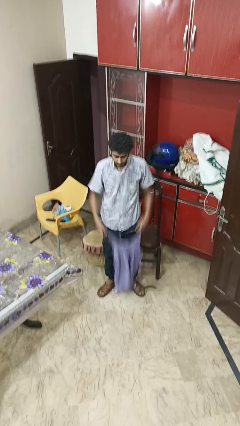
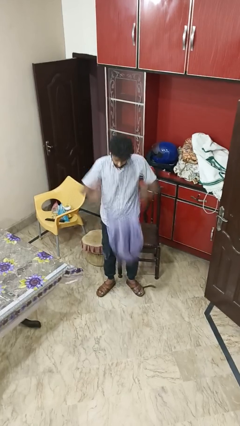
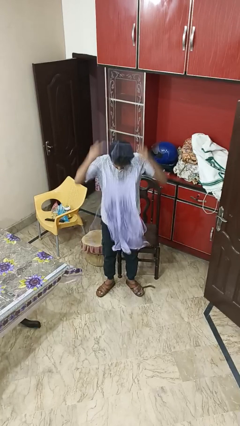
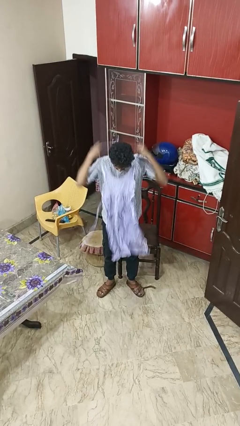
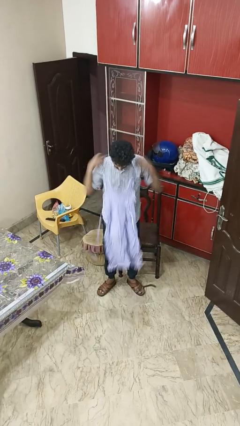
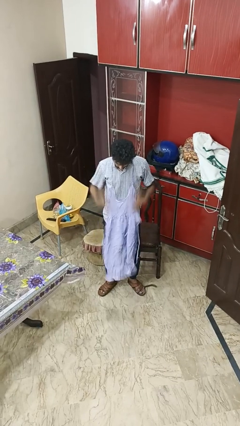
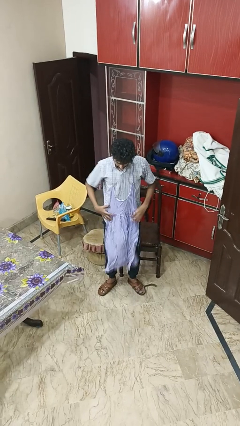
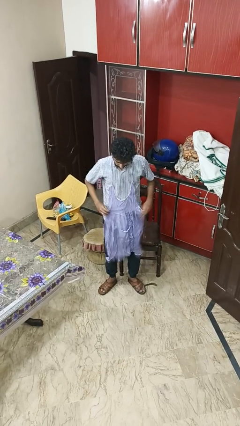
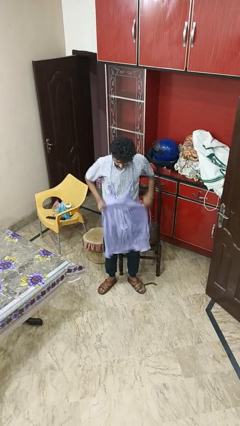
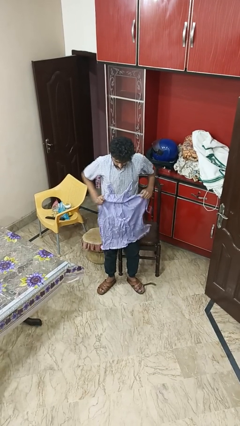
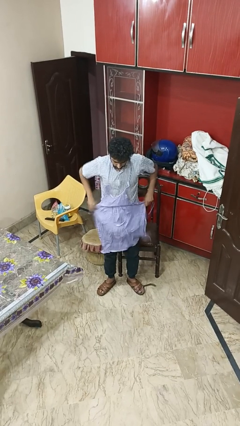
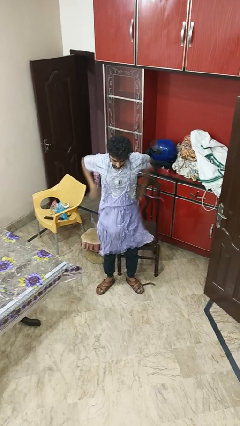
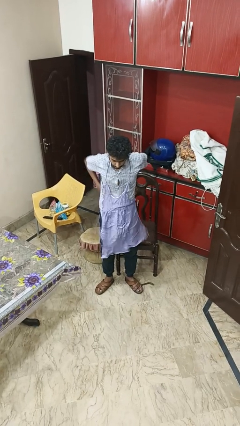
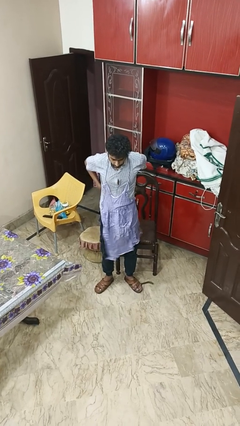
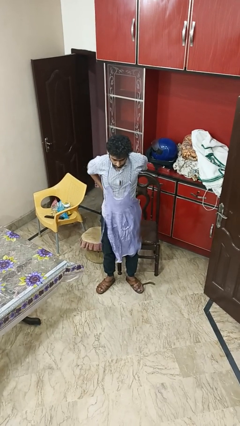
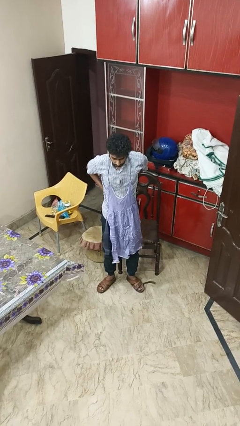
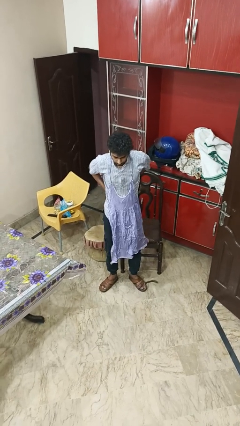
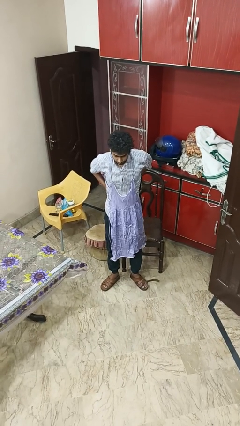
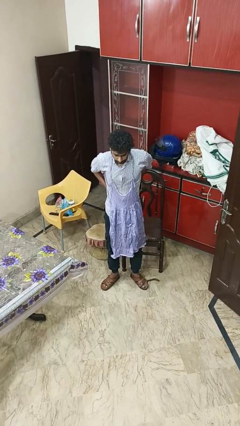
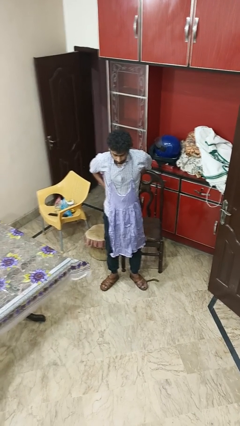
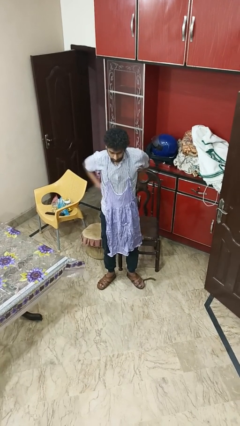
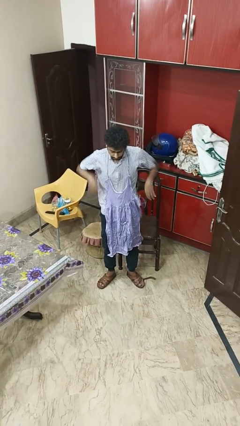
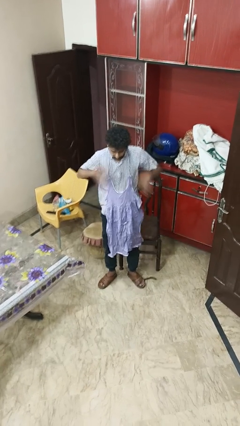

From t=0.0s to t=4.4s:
person puts on apron

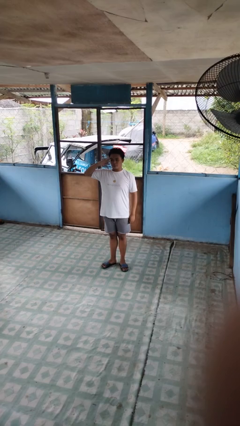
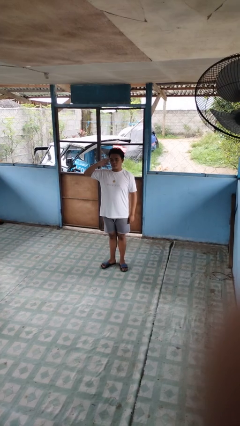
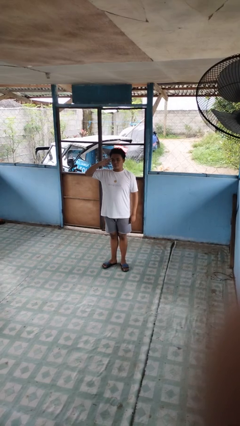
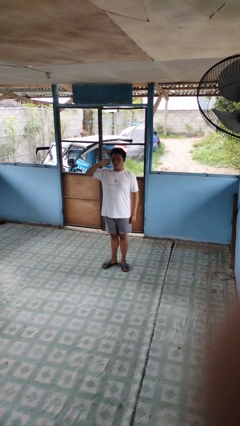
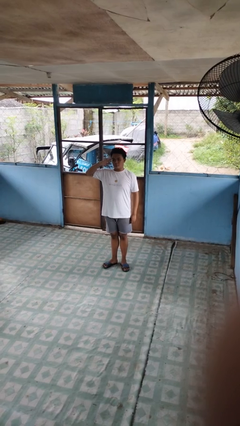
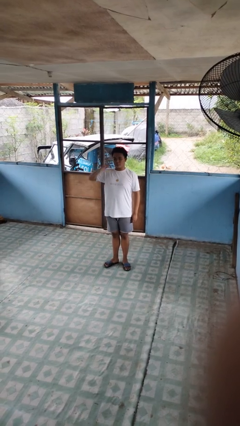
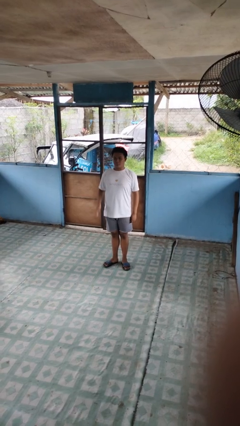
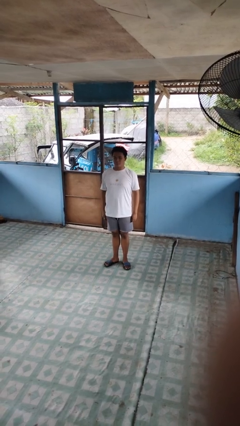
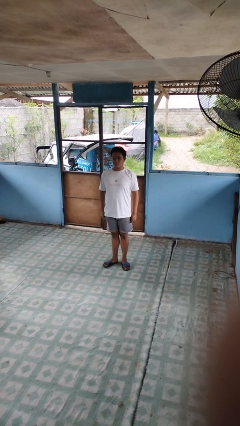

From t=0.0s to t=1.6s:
person salutes

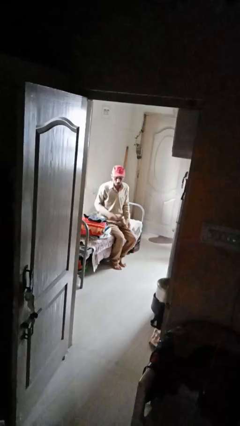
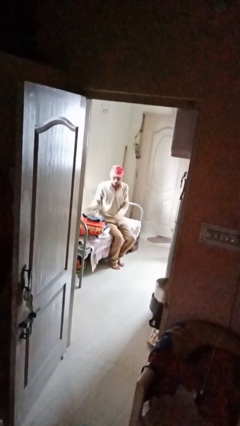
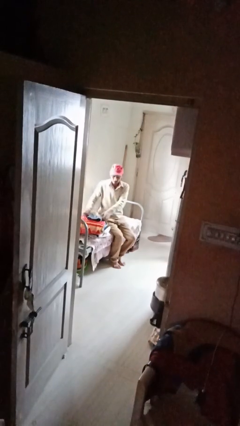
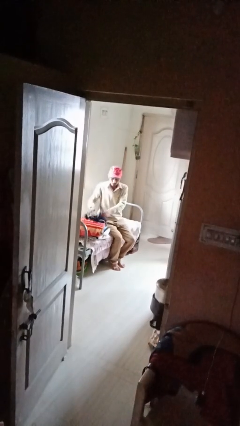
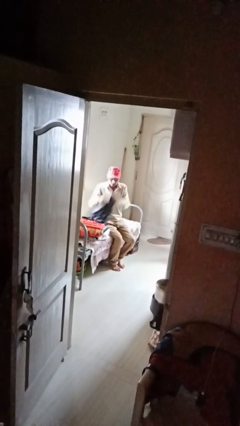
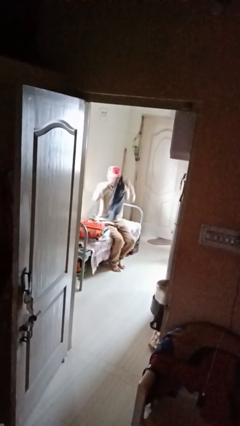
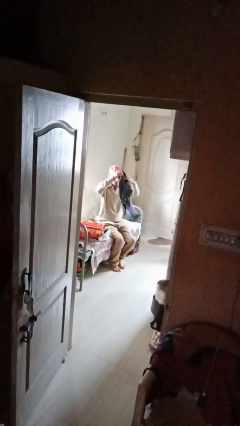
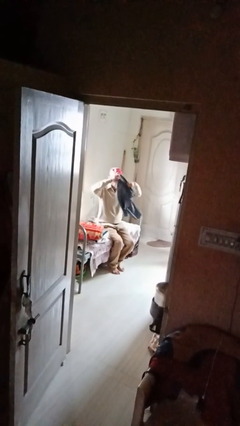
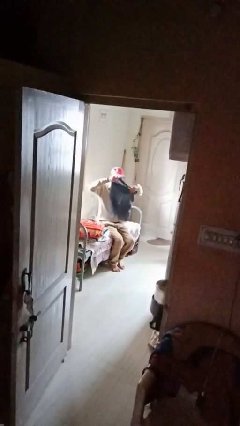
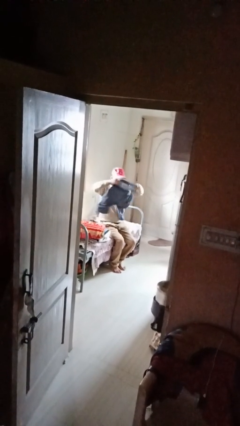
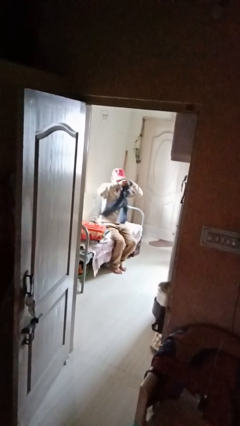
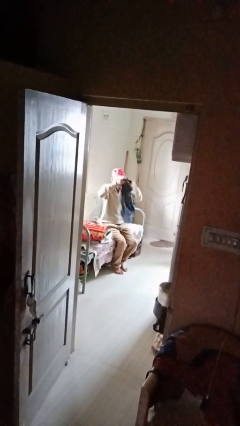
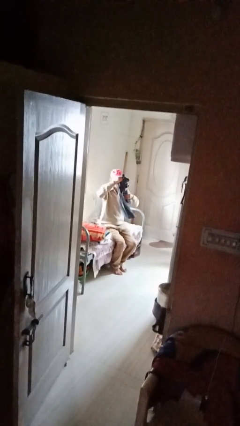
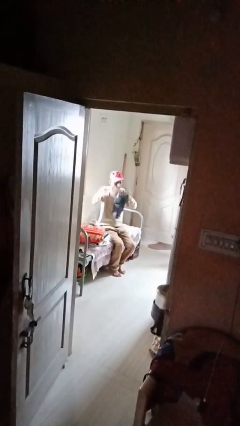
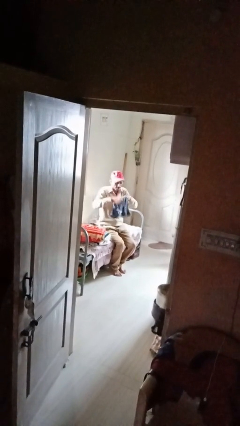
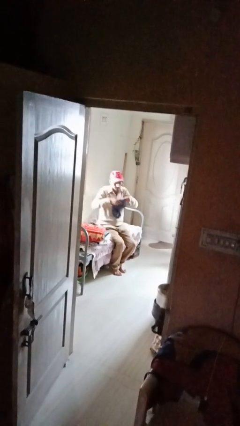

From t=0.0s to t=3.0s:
person folds pants

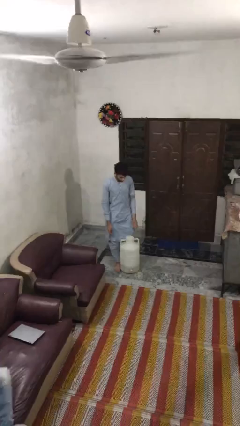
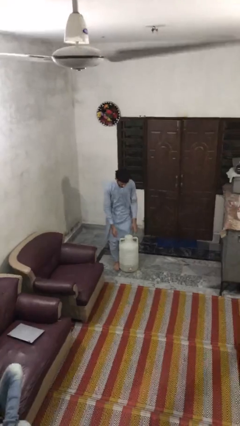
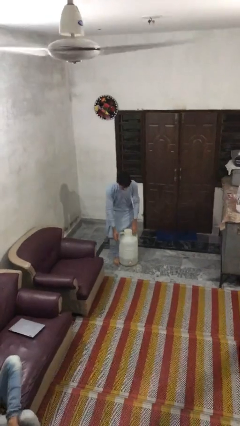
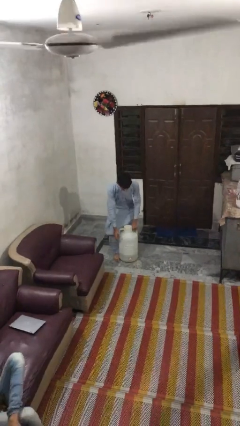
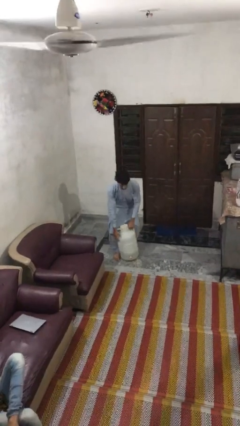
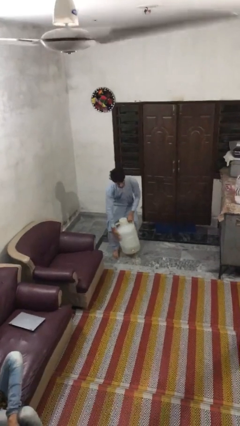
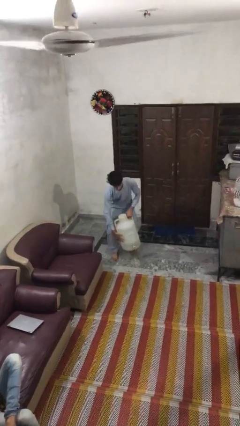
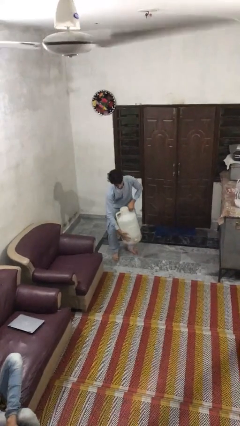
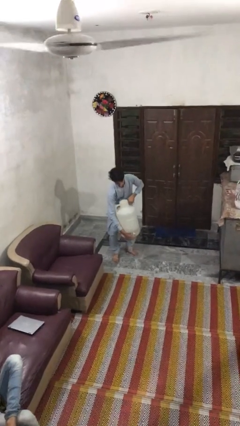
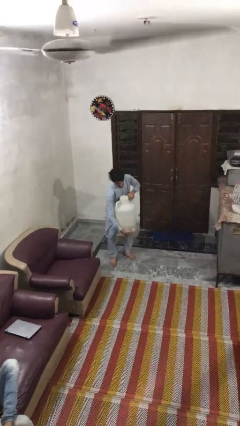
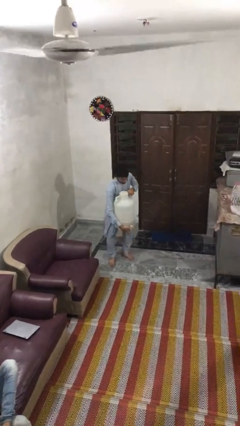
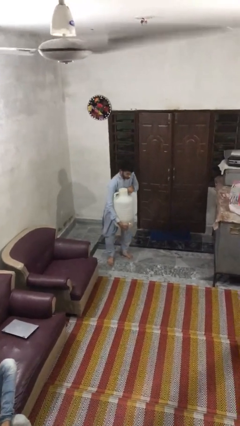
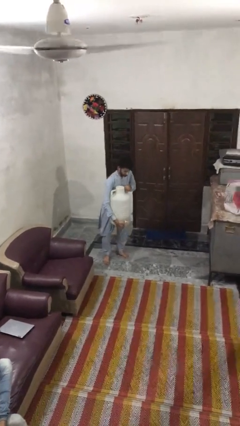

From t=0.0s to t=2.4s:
person picks up object from floor

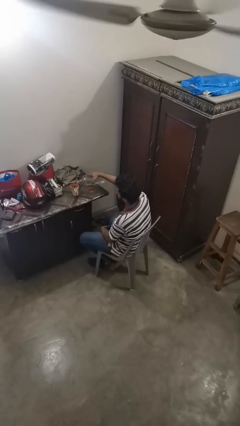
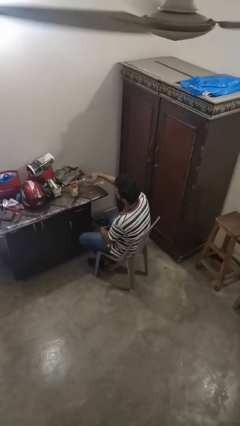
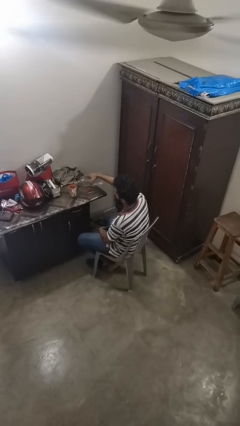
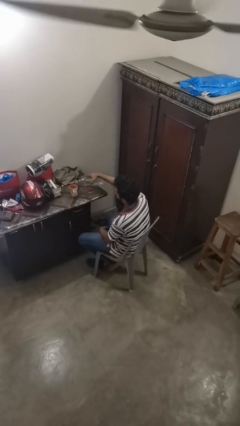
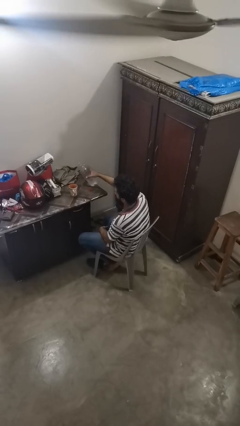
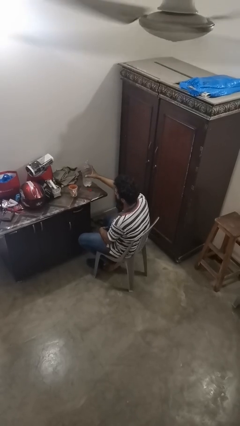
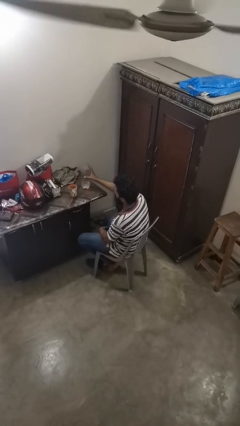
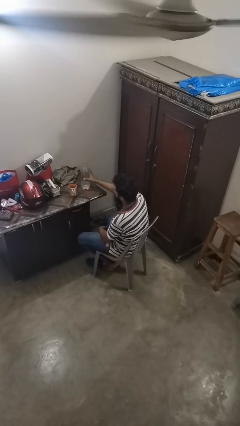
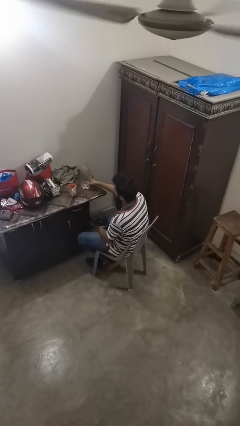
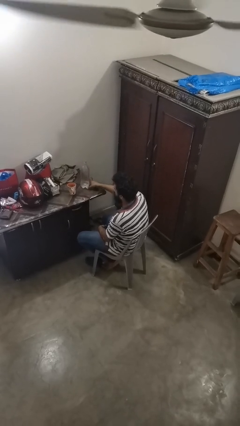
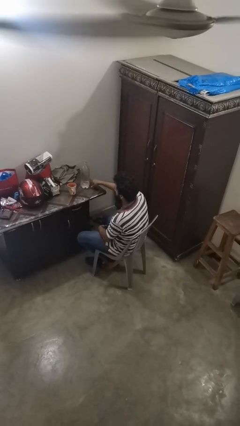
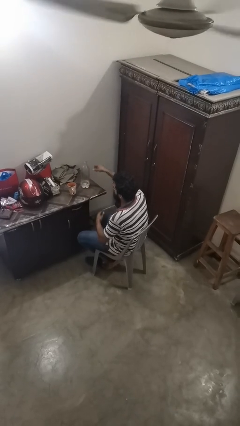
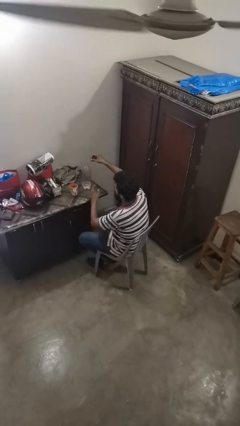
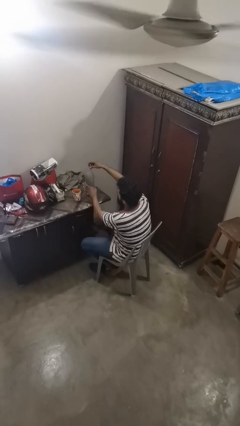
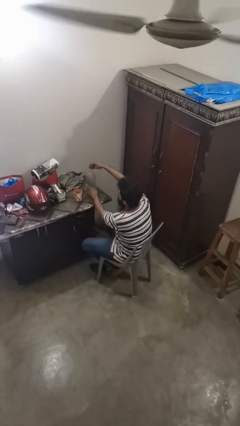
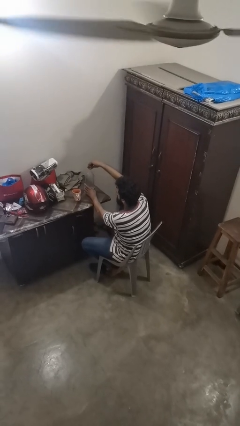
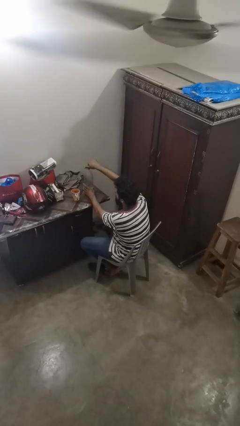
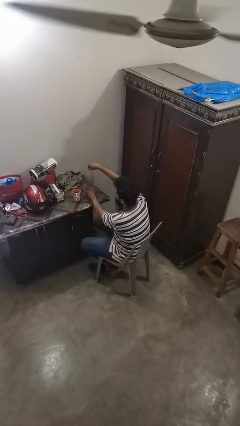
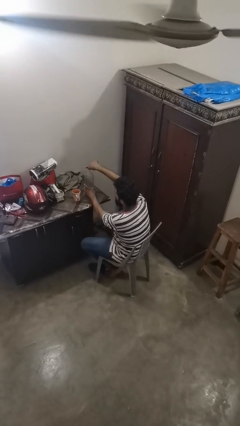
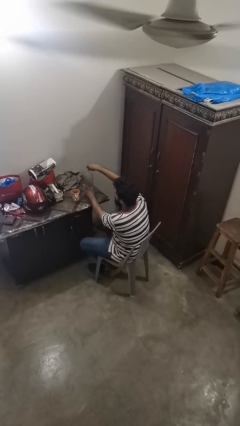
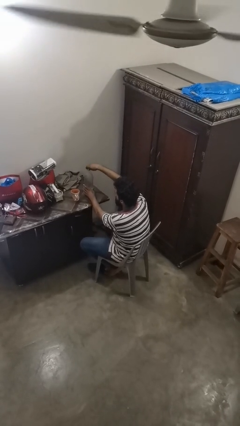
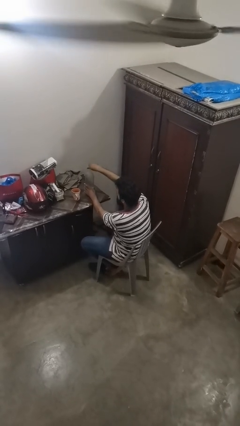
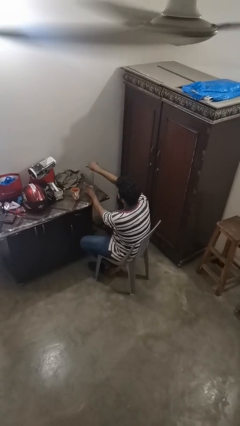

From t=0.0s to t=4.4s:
person screws lid to bottle

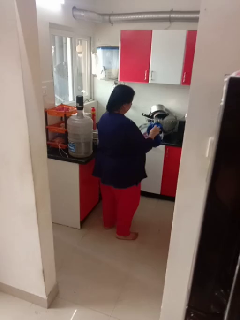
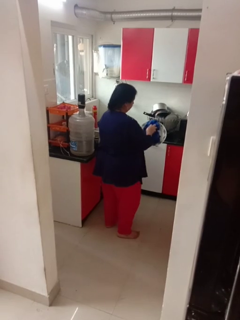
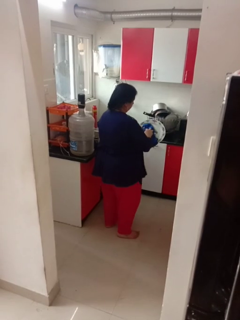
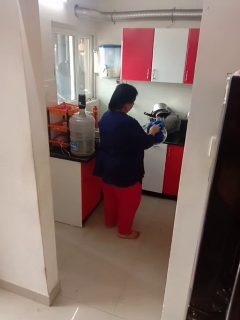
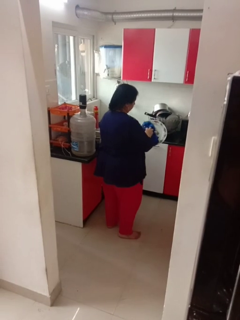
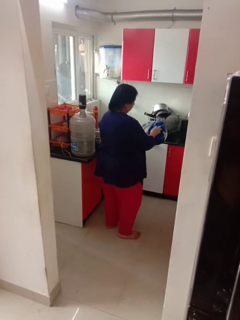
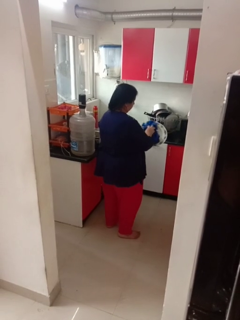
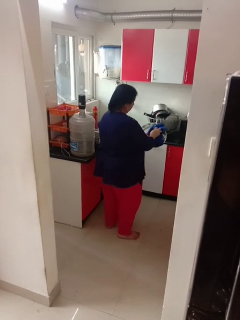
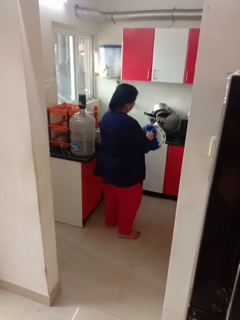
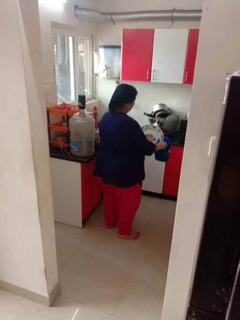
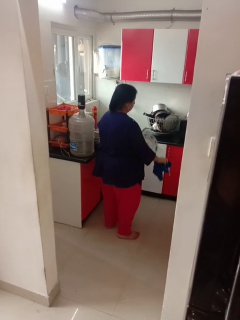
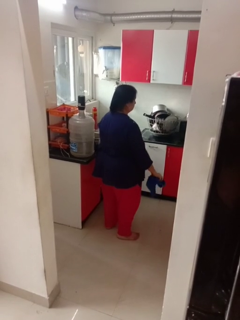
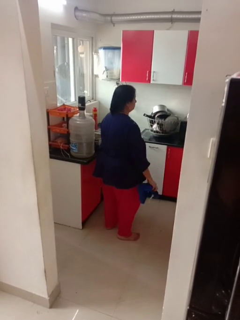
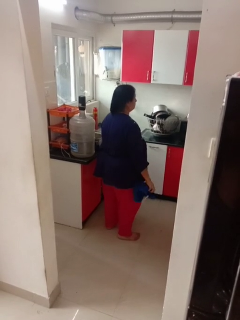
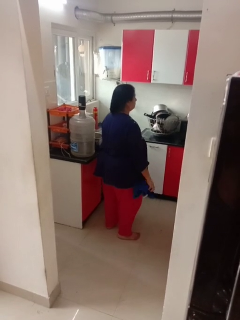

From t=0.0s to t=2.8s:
person dries dish

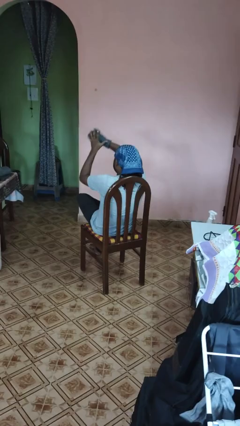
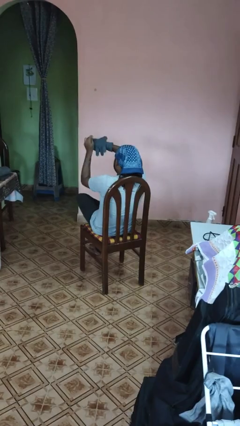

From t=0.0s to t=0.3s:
person takes off gloves
